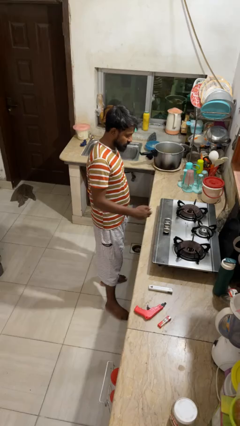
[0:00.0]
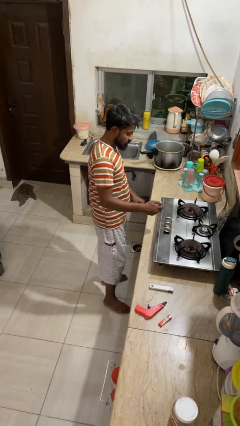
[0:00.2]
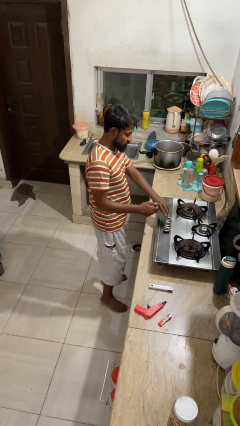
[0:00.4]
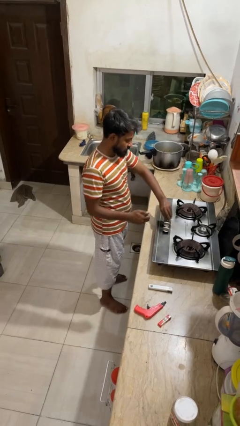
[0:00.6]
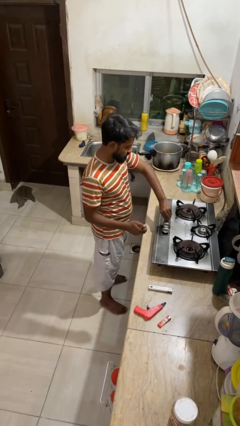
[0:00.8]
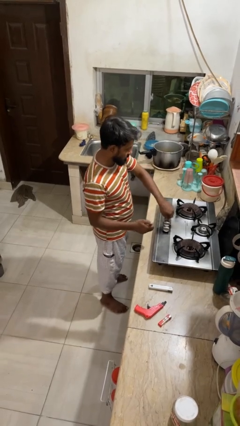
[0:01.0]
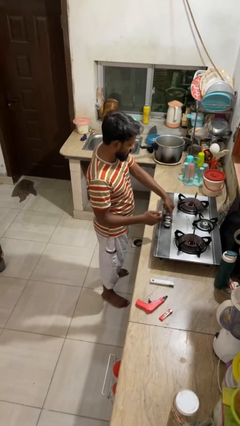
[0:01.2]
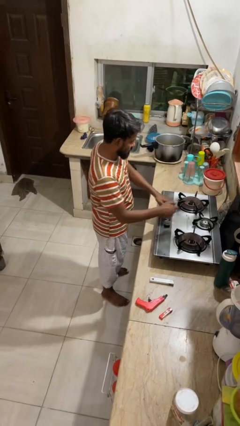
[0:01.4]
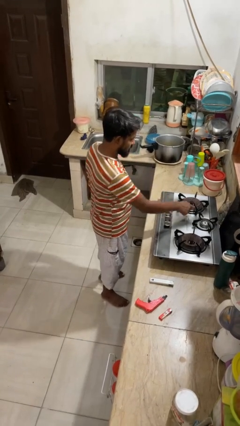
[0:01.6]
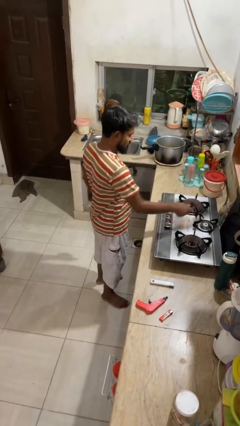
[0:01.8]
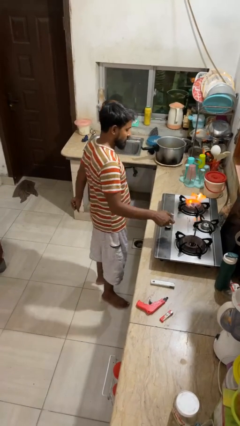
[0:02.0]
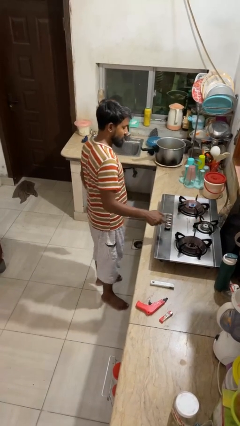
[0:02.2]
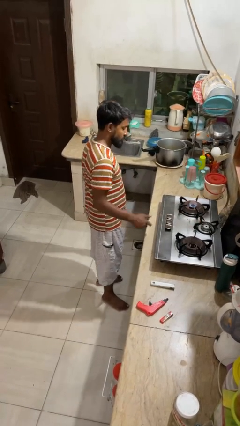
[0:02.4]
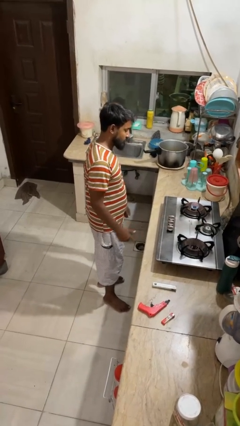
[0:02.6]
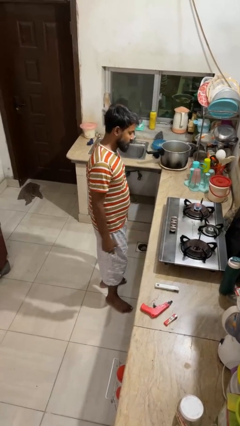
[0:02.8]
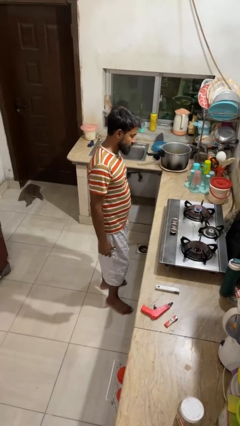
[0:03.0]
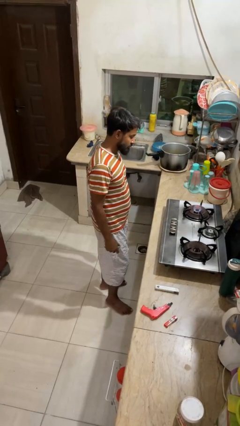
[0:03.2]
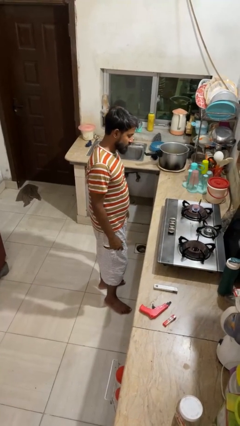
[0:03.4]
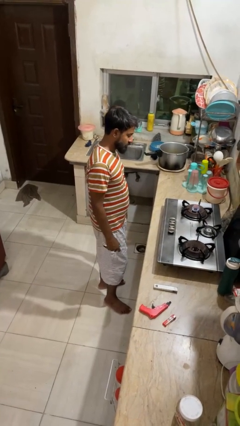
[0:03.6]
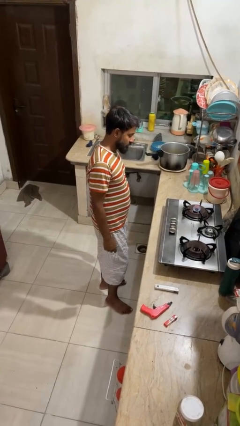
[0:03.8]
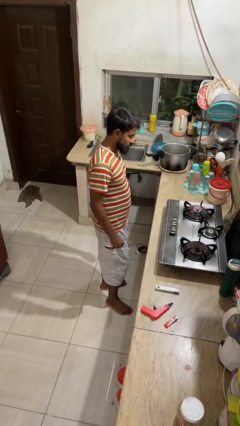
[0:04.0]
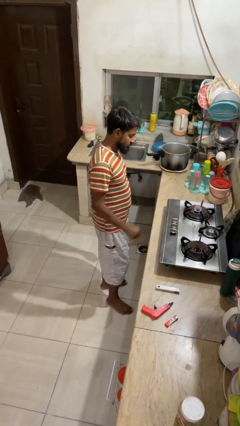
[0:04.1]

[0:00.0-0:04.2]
person turns on stovetop

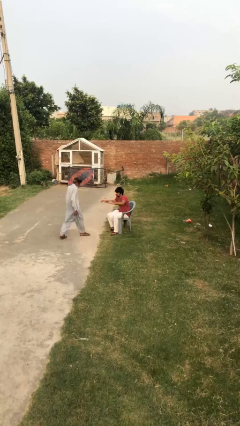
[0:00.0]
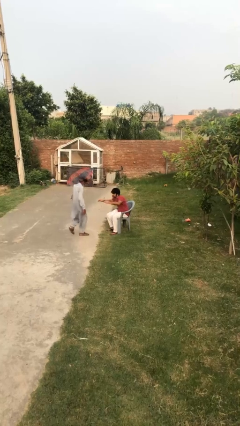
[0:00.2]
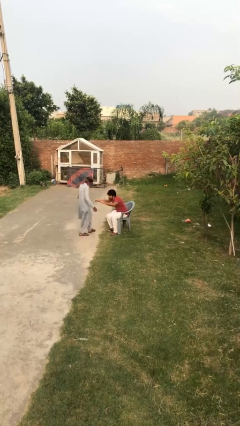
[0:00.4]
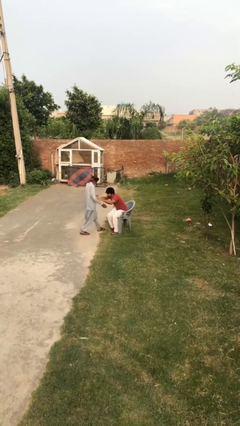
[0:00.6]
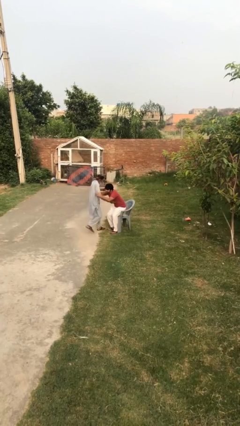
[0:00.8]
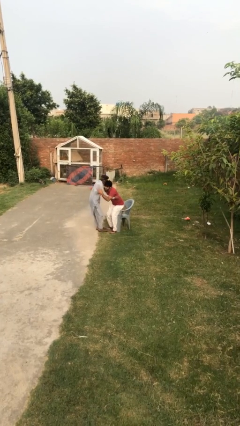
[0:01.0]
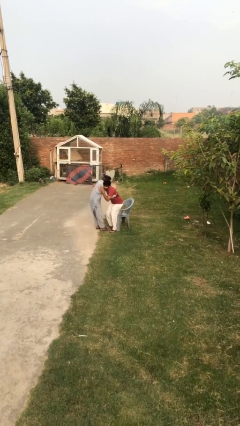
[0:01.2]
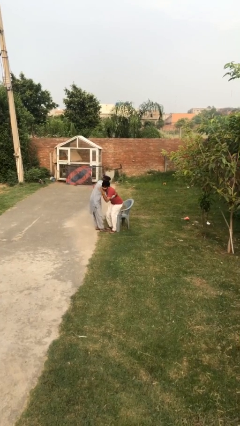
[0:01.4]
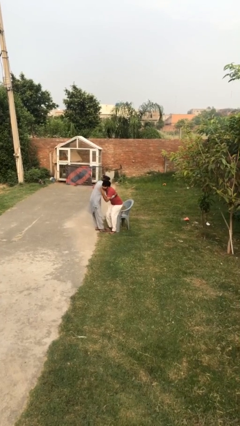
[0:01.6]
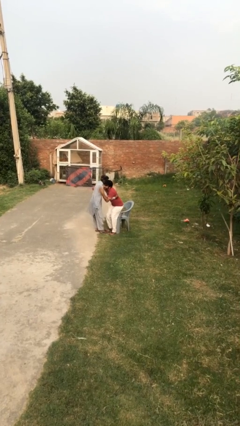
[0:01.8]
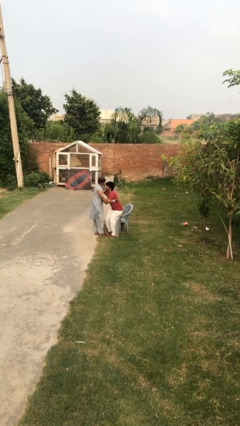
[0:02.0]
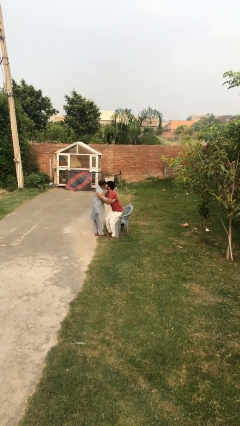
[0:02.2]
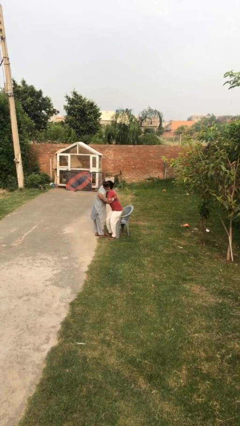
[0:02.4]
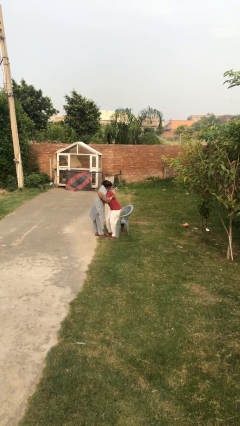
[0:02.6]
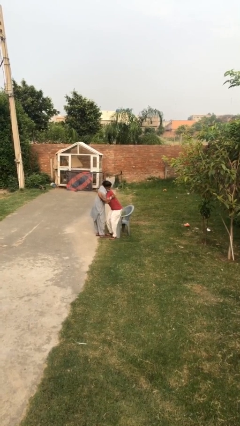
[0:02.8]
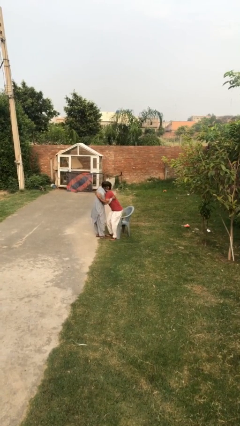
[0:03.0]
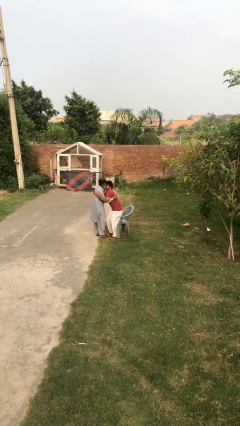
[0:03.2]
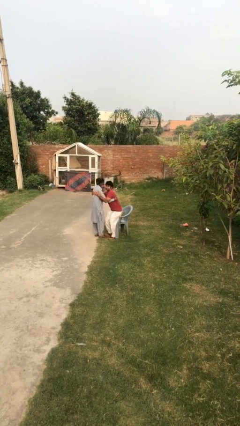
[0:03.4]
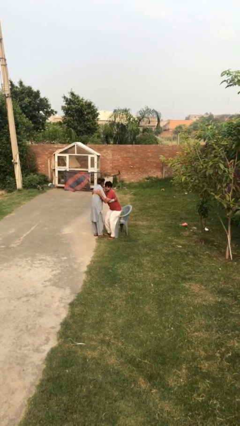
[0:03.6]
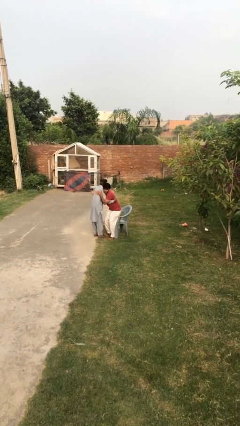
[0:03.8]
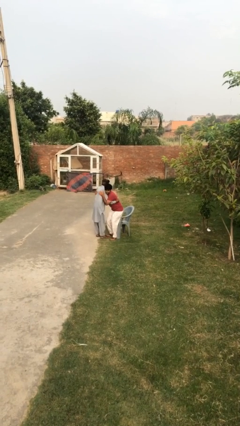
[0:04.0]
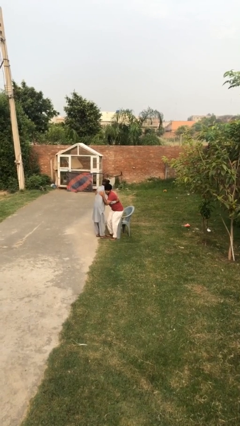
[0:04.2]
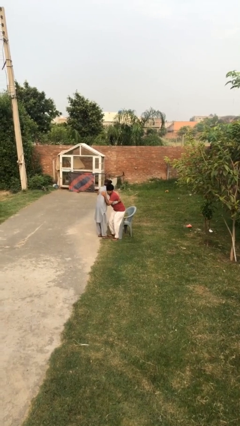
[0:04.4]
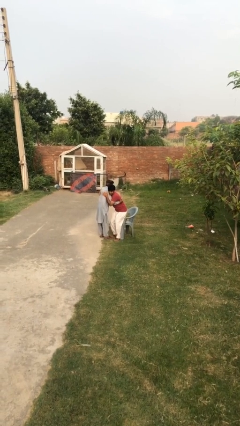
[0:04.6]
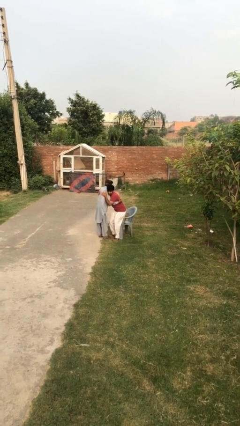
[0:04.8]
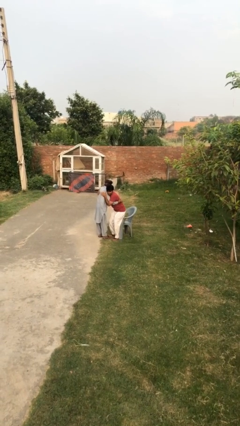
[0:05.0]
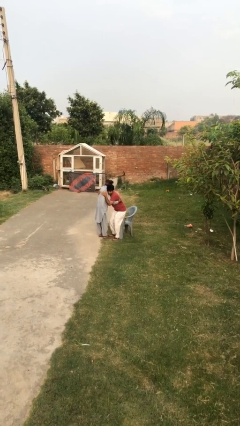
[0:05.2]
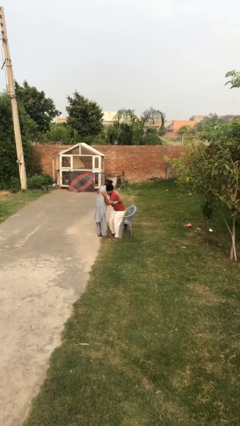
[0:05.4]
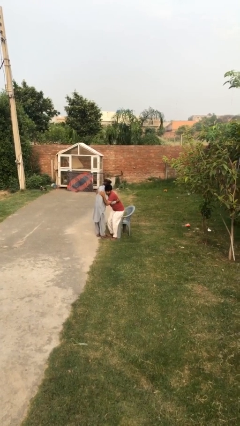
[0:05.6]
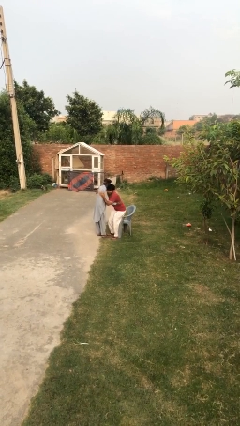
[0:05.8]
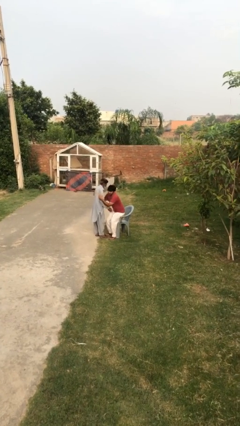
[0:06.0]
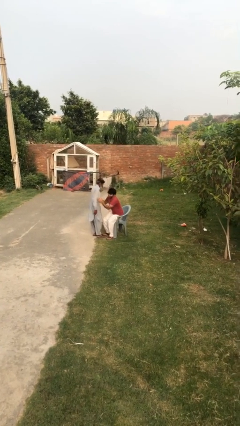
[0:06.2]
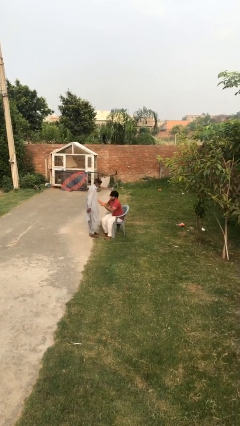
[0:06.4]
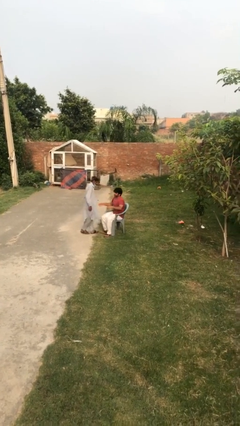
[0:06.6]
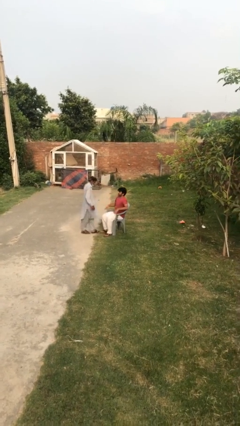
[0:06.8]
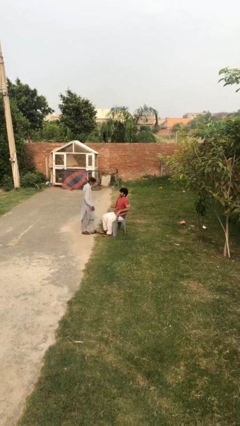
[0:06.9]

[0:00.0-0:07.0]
person embraces person

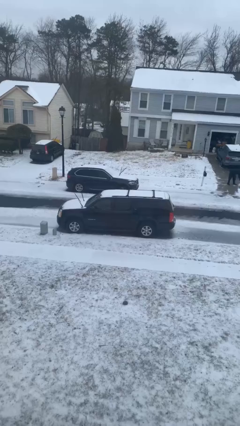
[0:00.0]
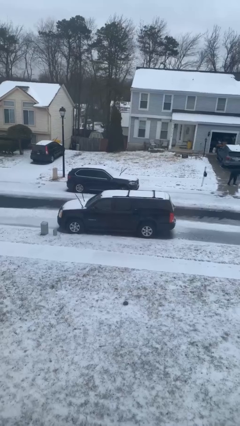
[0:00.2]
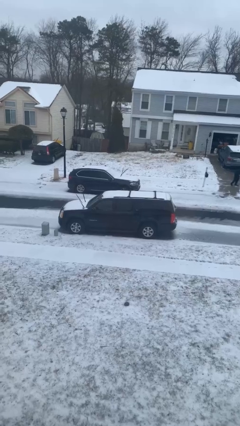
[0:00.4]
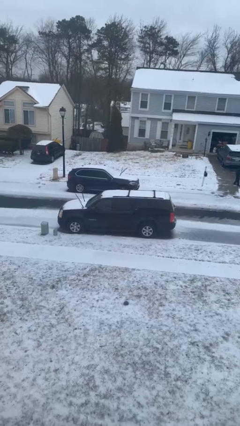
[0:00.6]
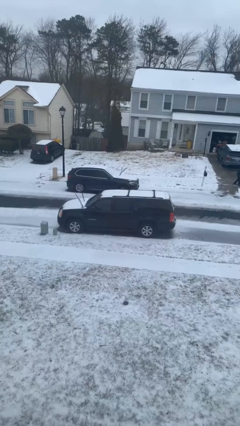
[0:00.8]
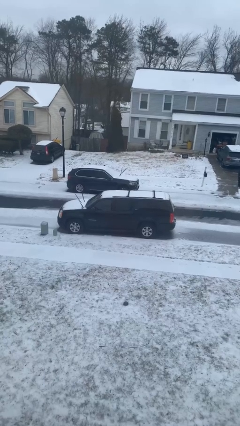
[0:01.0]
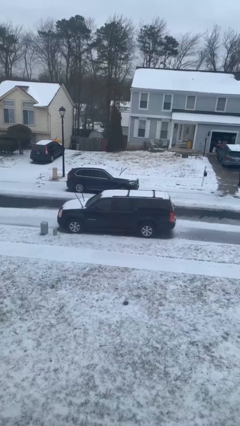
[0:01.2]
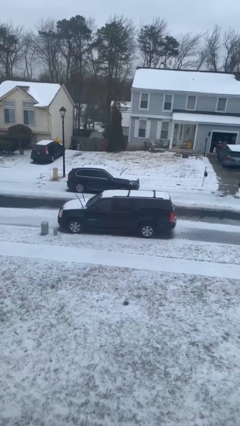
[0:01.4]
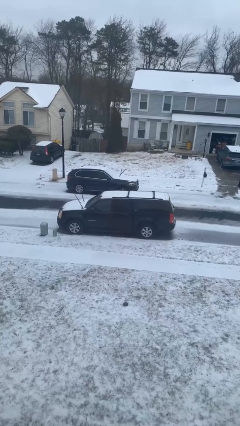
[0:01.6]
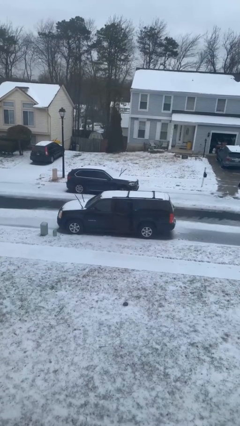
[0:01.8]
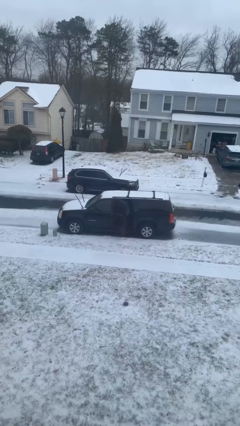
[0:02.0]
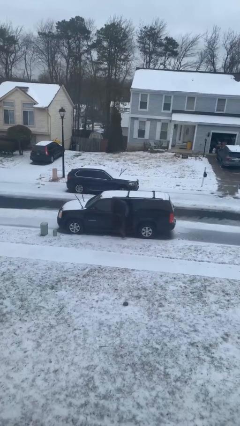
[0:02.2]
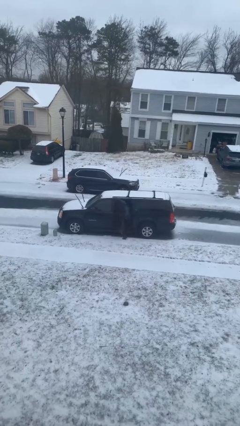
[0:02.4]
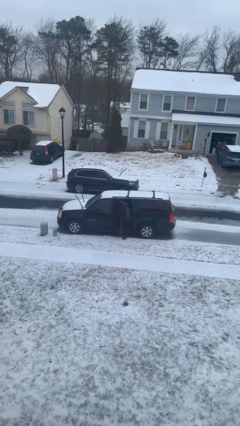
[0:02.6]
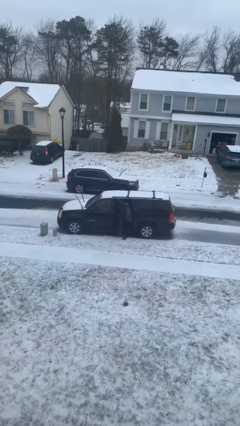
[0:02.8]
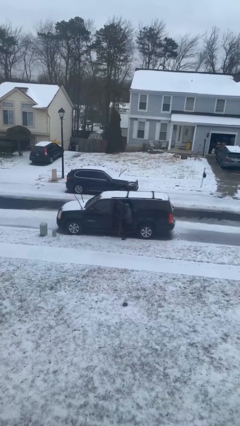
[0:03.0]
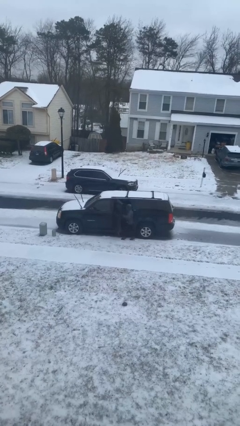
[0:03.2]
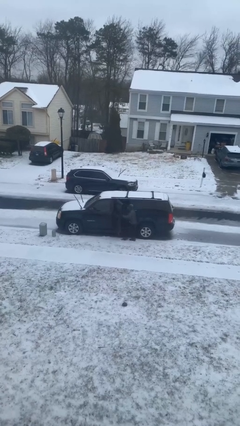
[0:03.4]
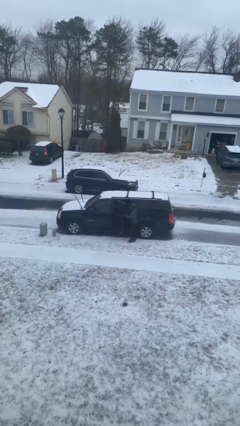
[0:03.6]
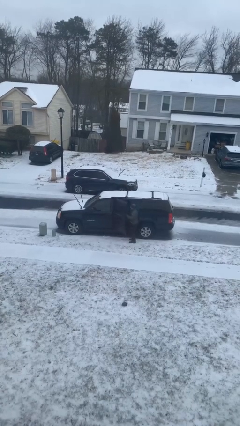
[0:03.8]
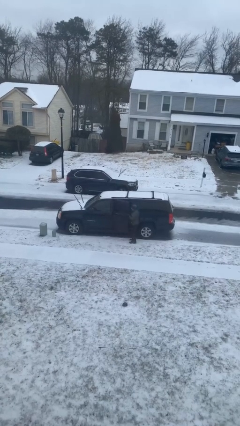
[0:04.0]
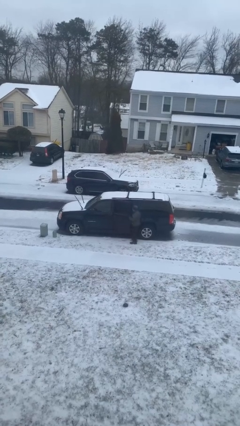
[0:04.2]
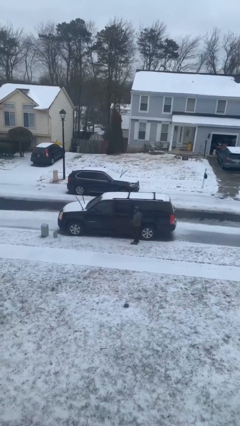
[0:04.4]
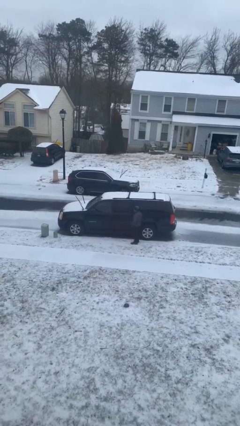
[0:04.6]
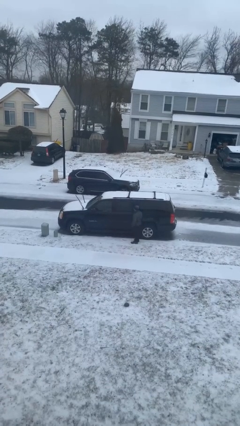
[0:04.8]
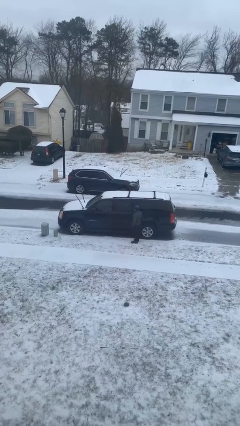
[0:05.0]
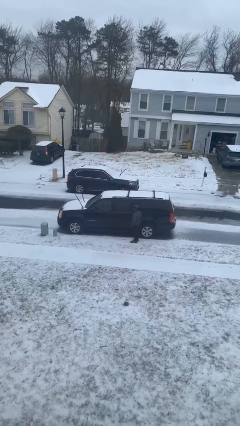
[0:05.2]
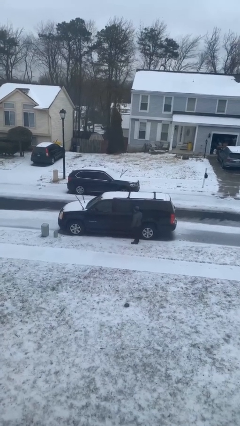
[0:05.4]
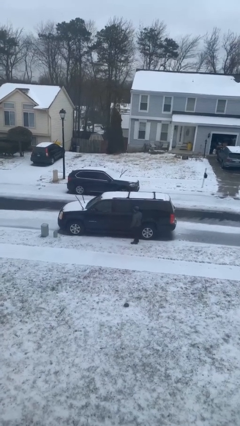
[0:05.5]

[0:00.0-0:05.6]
car drops off person

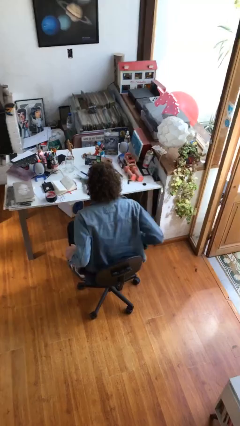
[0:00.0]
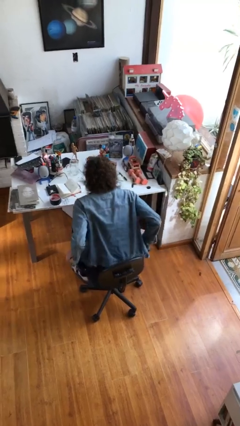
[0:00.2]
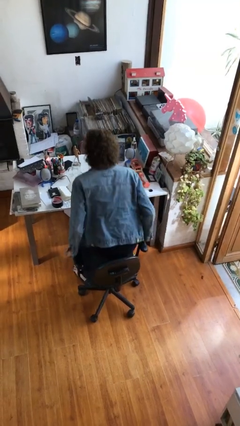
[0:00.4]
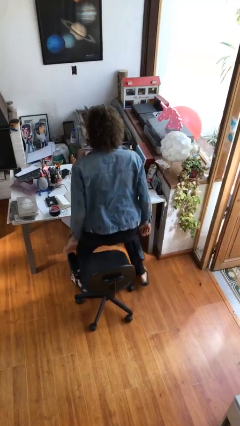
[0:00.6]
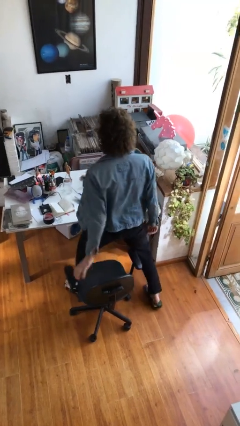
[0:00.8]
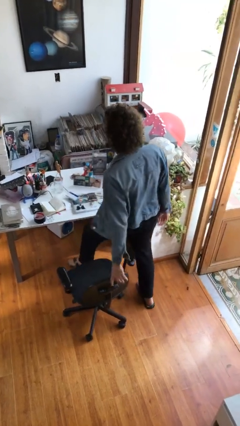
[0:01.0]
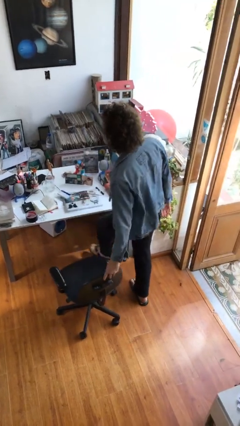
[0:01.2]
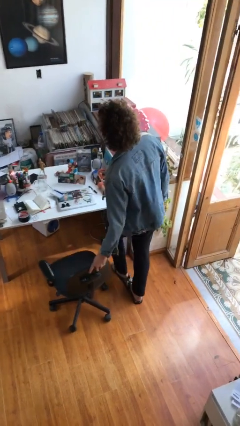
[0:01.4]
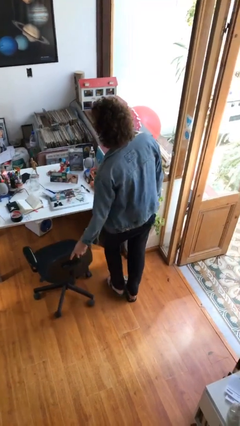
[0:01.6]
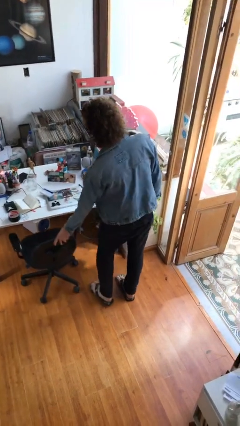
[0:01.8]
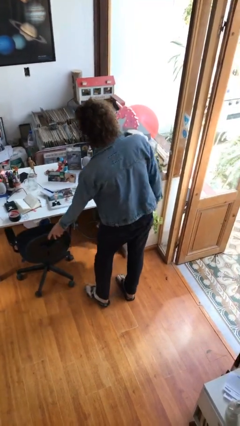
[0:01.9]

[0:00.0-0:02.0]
person stands up
